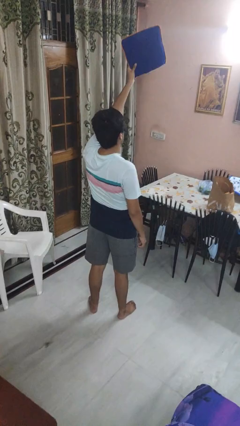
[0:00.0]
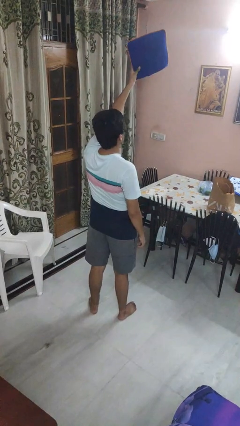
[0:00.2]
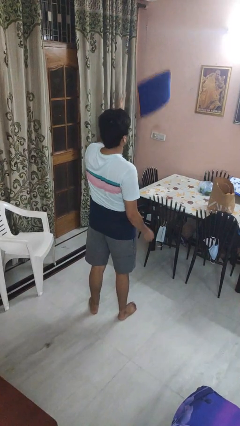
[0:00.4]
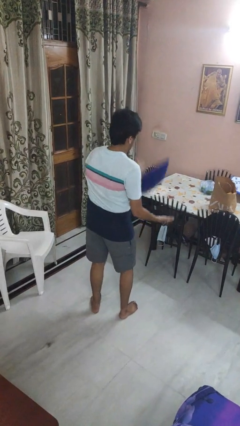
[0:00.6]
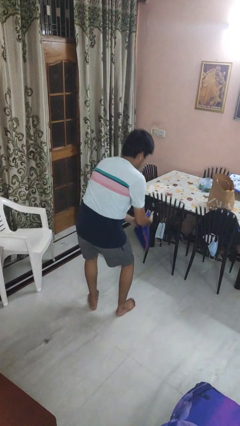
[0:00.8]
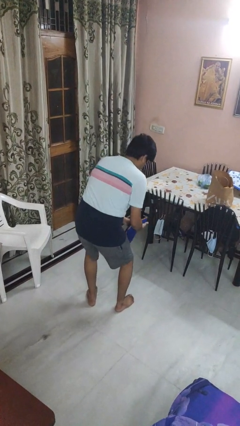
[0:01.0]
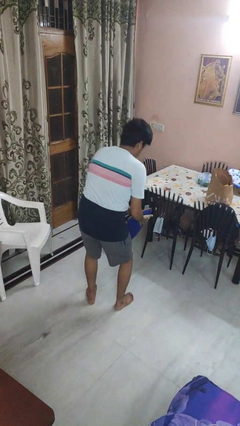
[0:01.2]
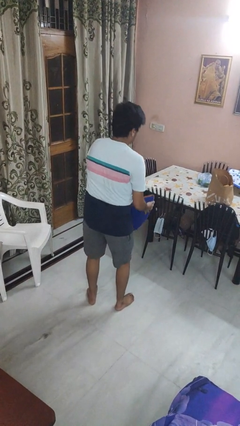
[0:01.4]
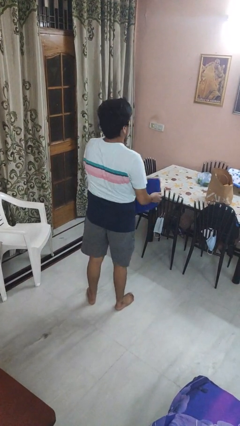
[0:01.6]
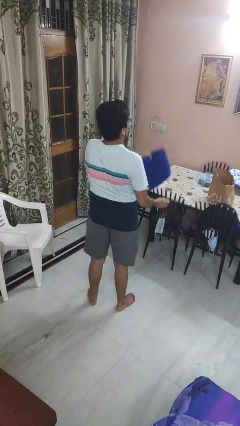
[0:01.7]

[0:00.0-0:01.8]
person catches dropped object

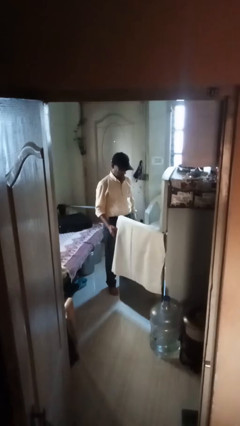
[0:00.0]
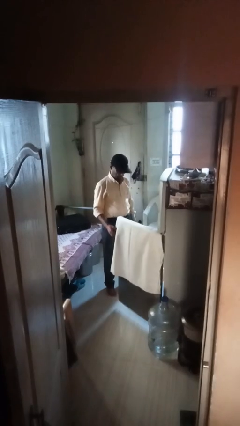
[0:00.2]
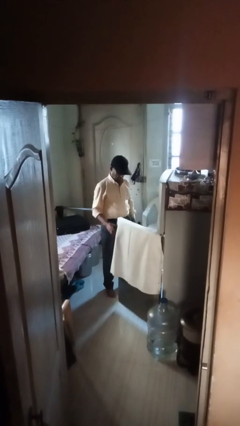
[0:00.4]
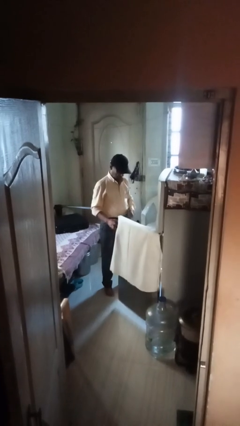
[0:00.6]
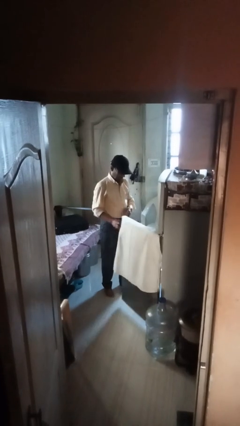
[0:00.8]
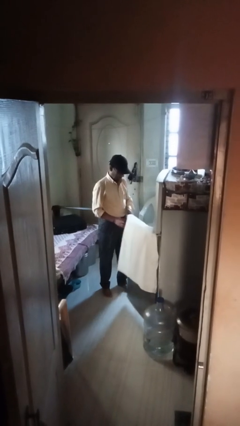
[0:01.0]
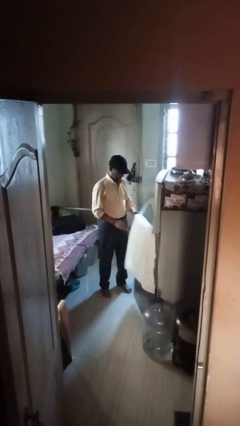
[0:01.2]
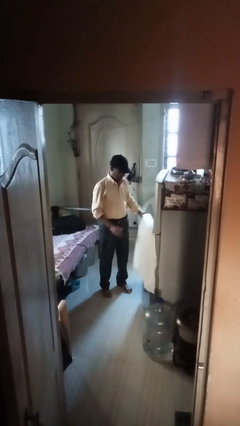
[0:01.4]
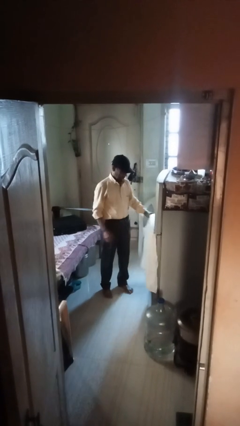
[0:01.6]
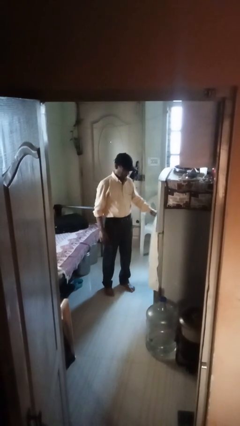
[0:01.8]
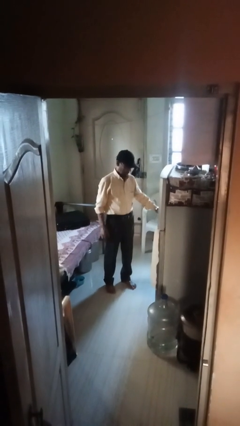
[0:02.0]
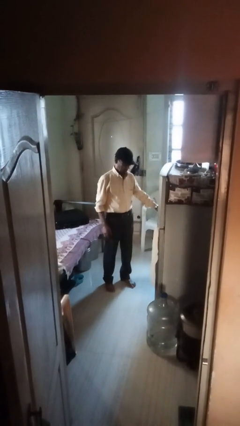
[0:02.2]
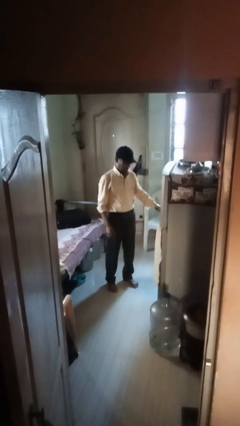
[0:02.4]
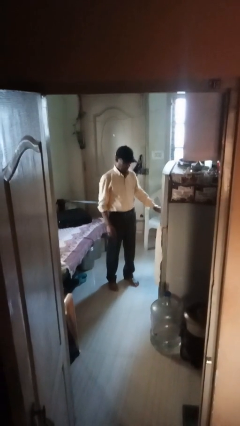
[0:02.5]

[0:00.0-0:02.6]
person closes clothes washer

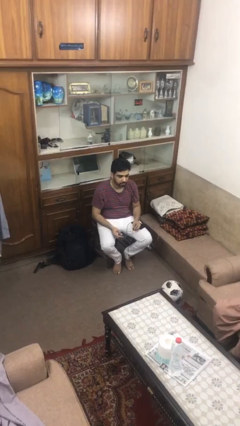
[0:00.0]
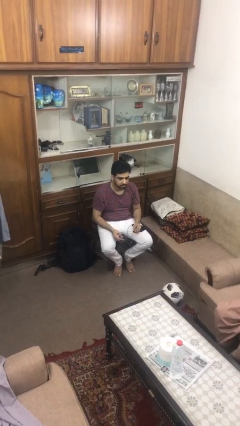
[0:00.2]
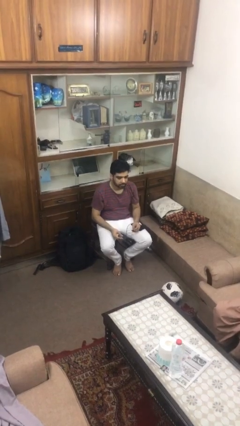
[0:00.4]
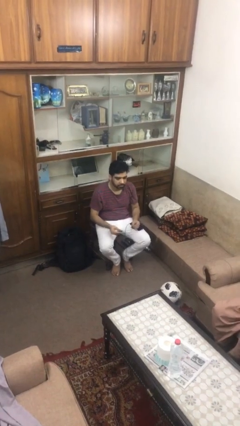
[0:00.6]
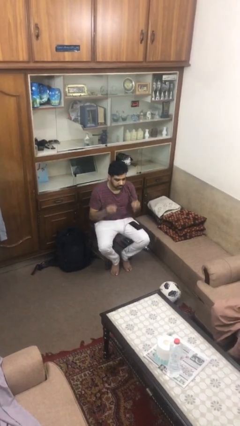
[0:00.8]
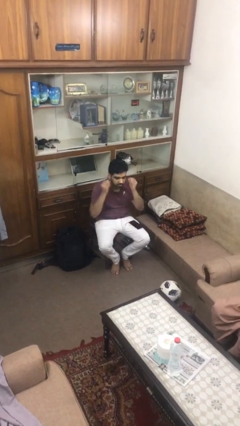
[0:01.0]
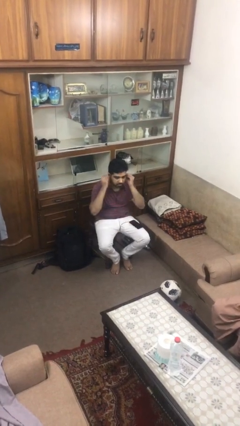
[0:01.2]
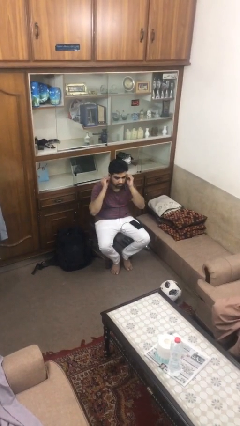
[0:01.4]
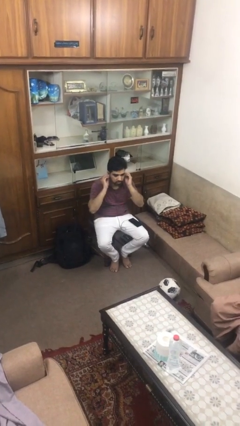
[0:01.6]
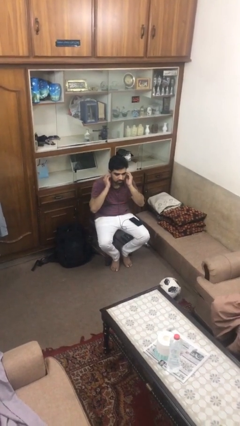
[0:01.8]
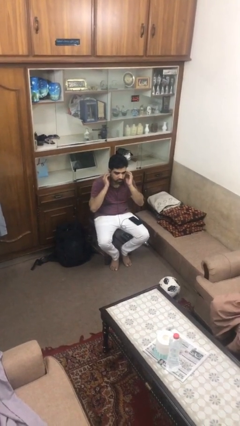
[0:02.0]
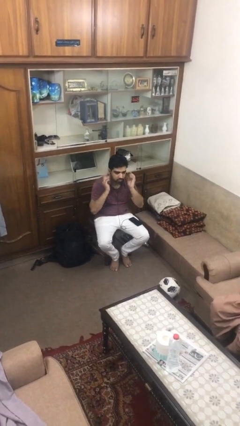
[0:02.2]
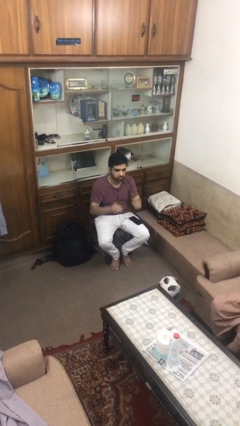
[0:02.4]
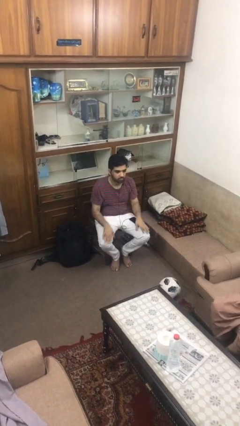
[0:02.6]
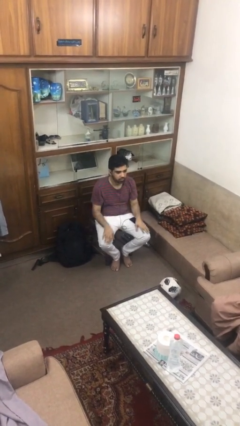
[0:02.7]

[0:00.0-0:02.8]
person puts on headphones

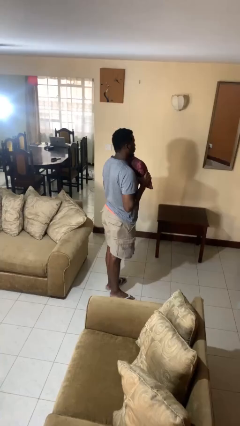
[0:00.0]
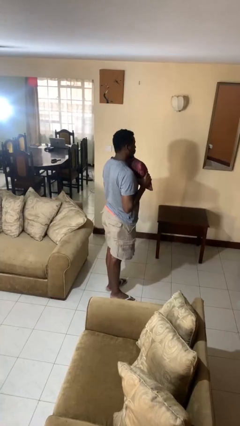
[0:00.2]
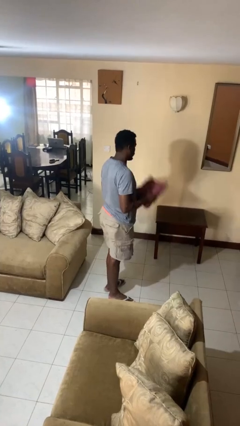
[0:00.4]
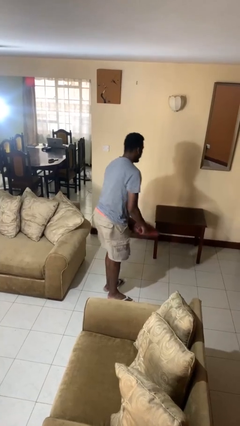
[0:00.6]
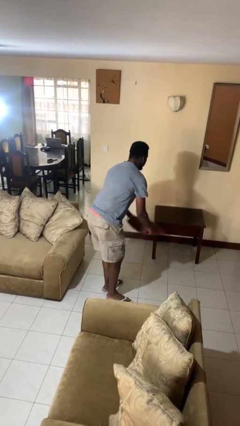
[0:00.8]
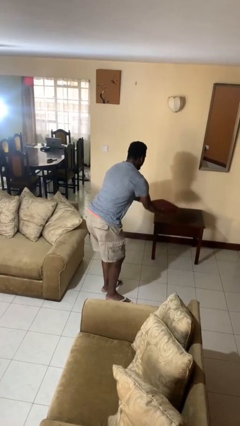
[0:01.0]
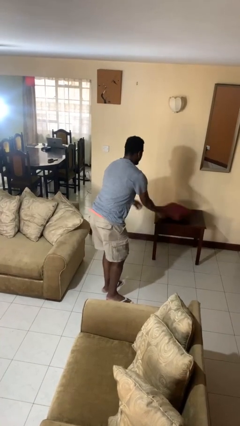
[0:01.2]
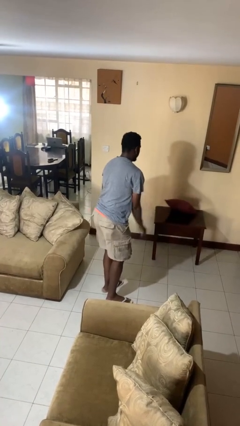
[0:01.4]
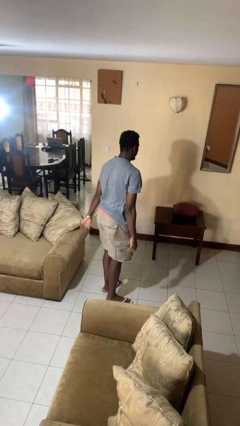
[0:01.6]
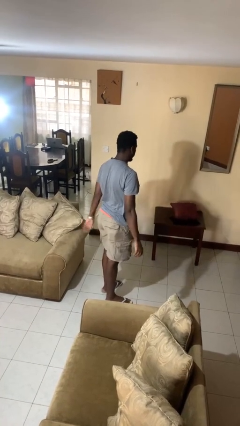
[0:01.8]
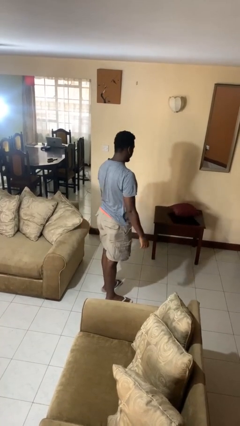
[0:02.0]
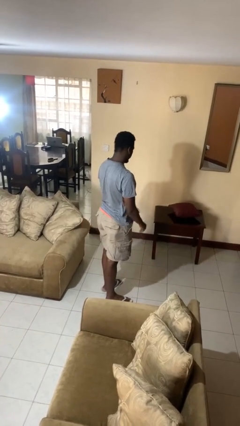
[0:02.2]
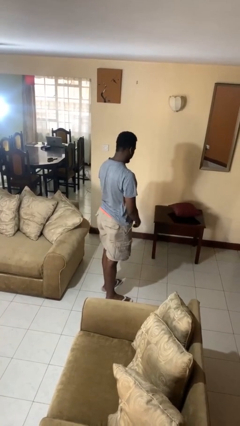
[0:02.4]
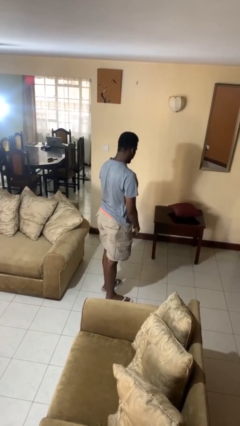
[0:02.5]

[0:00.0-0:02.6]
person throws object on table

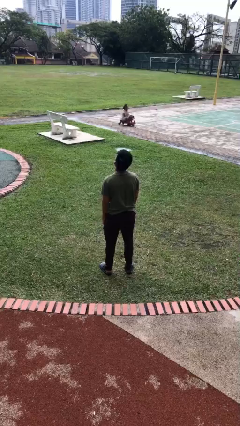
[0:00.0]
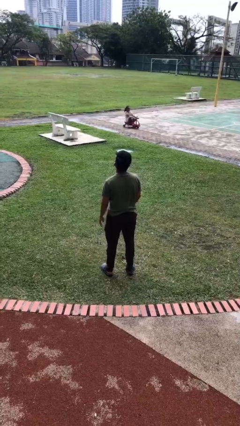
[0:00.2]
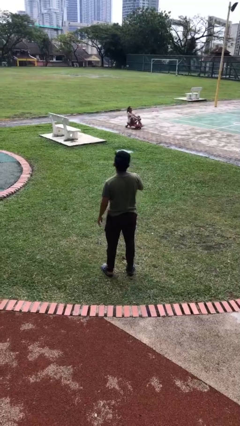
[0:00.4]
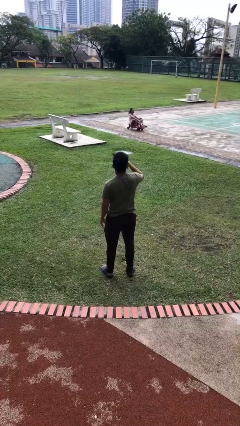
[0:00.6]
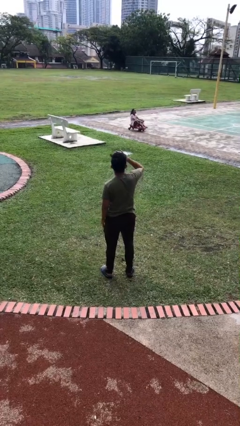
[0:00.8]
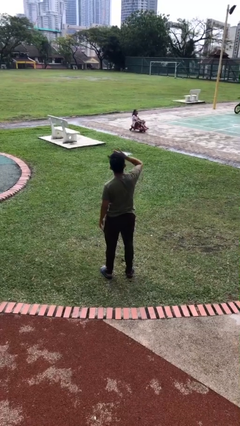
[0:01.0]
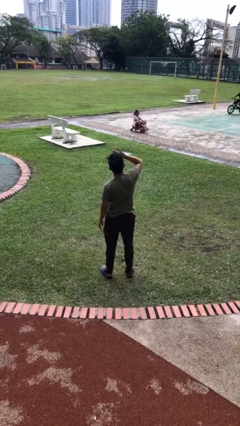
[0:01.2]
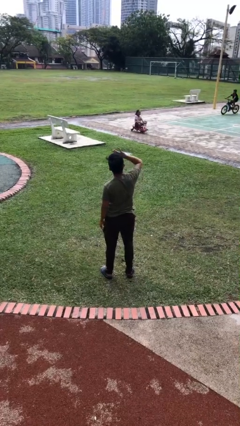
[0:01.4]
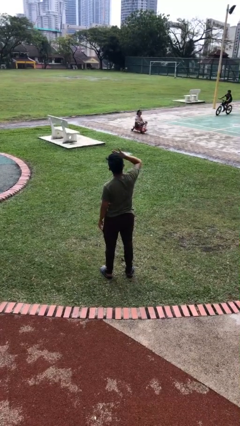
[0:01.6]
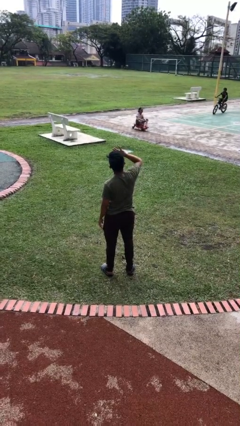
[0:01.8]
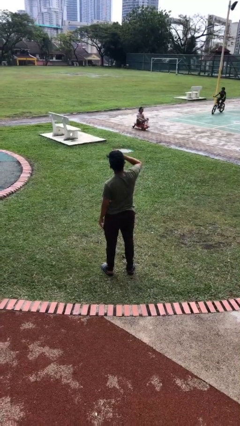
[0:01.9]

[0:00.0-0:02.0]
person shades eyes

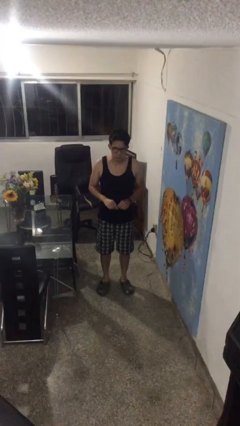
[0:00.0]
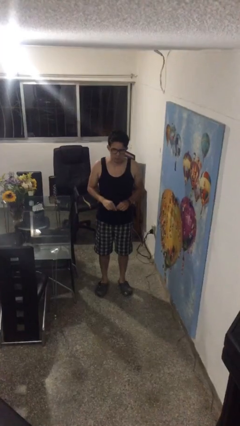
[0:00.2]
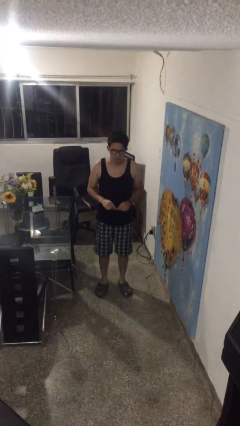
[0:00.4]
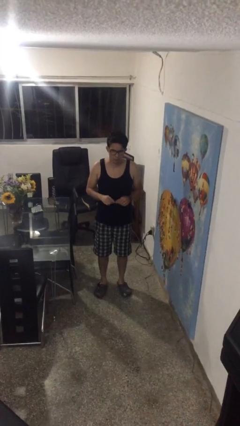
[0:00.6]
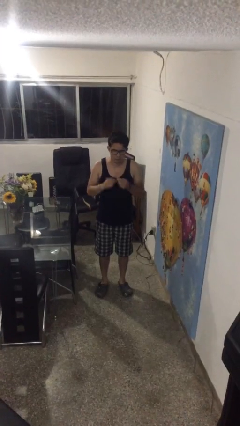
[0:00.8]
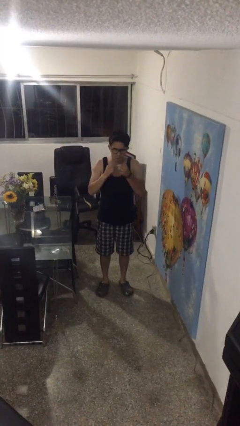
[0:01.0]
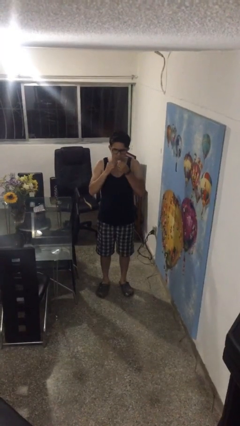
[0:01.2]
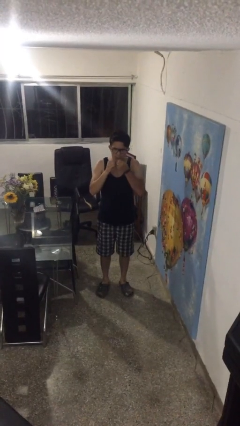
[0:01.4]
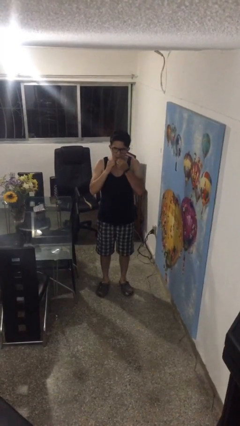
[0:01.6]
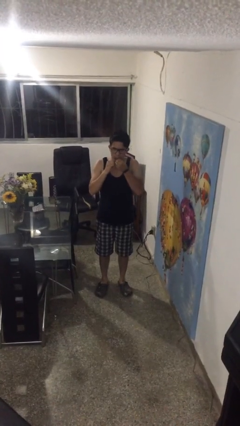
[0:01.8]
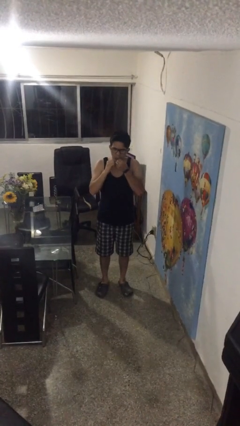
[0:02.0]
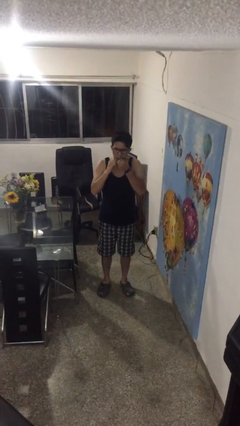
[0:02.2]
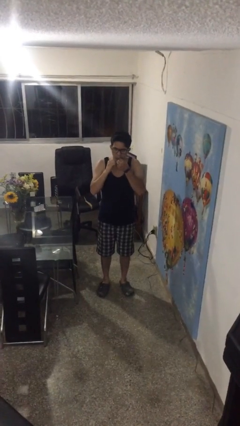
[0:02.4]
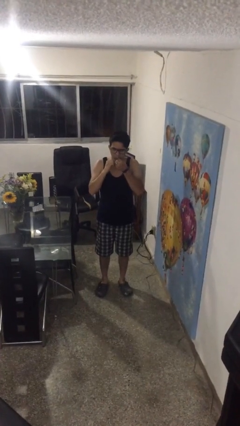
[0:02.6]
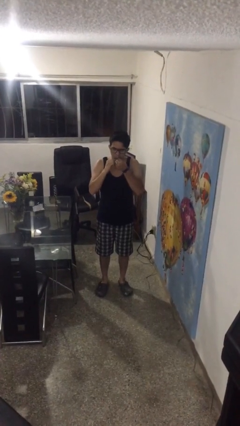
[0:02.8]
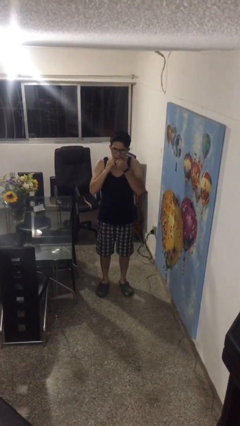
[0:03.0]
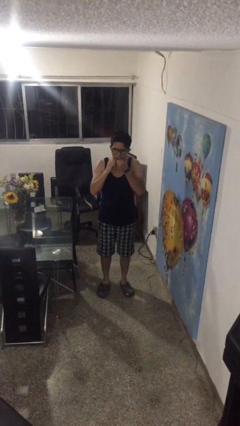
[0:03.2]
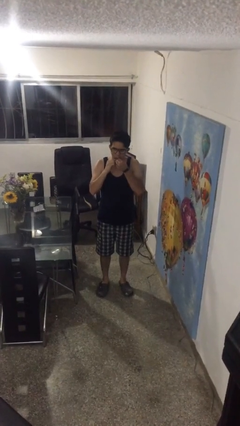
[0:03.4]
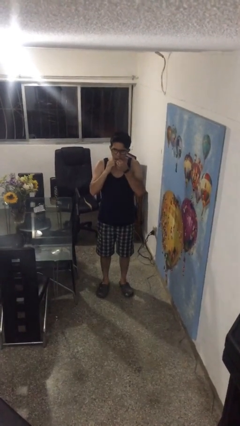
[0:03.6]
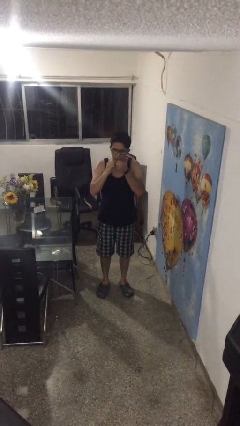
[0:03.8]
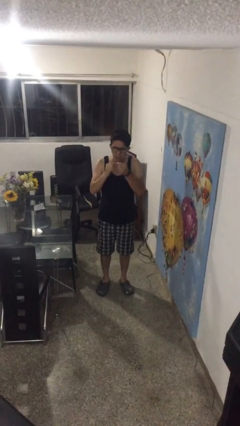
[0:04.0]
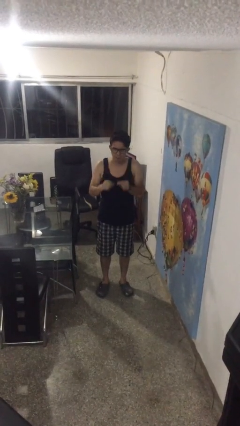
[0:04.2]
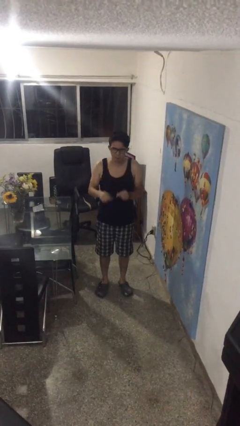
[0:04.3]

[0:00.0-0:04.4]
person flosses

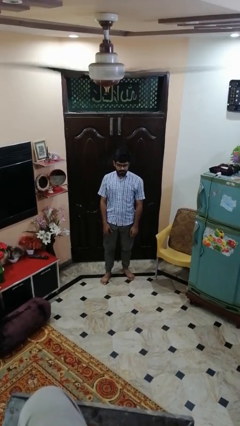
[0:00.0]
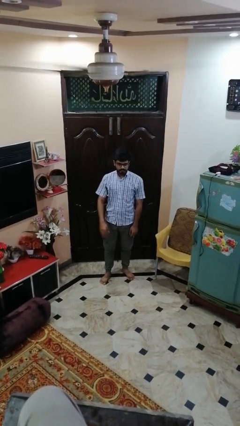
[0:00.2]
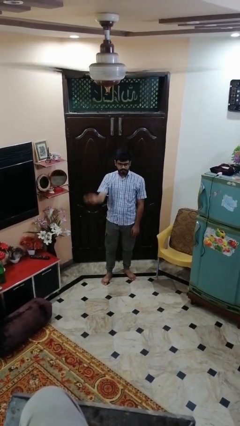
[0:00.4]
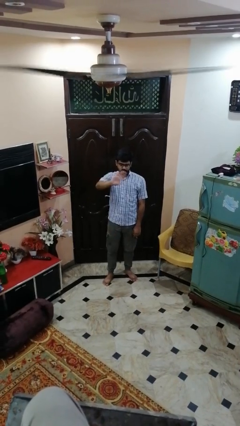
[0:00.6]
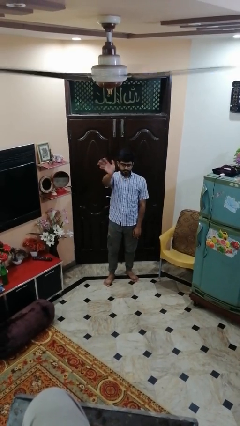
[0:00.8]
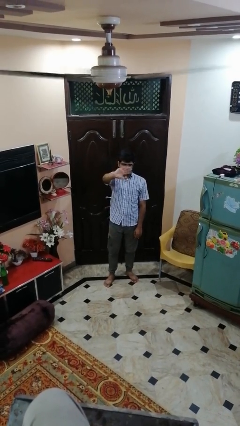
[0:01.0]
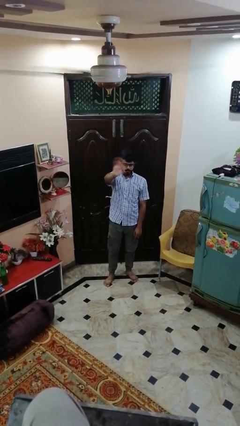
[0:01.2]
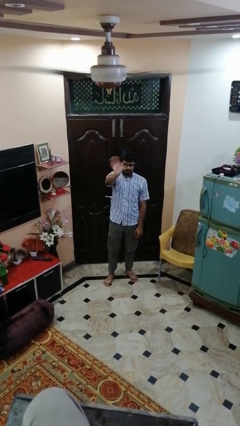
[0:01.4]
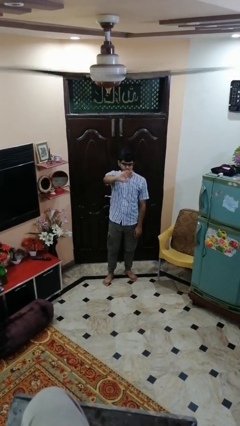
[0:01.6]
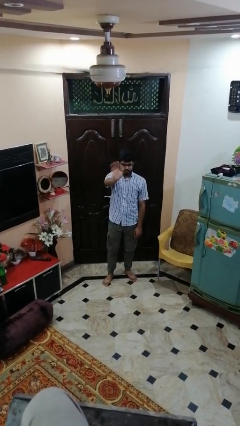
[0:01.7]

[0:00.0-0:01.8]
person waves at person
